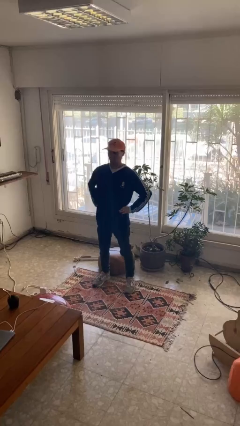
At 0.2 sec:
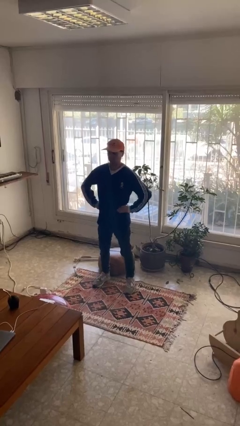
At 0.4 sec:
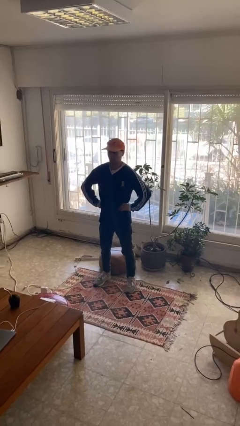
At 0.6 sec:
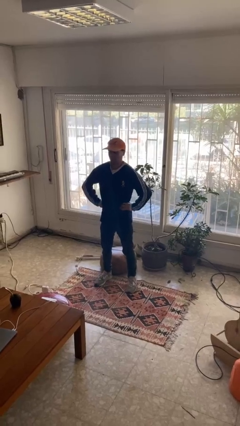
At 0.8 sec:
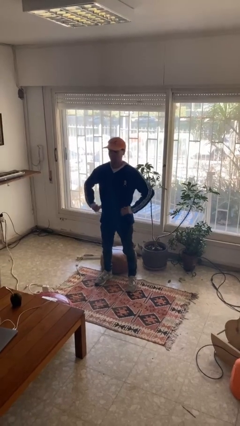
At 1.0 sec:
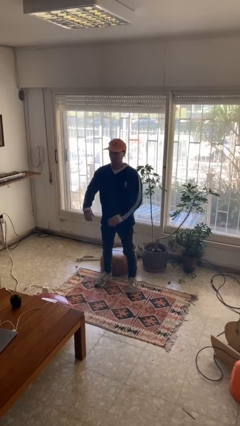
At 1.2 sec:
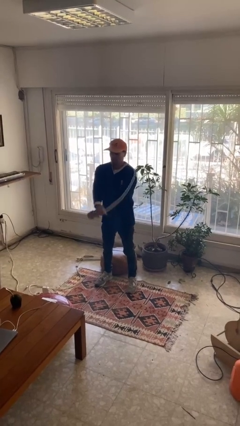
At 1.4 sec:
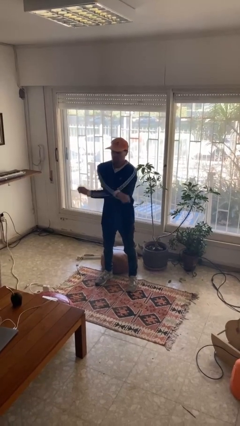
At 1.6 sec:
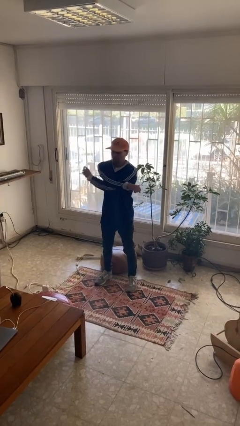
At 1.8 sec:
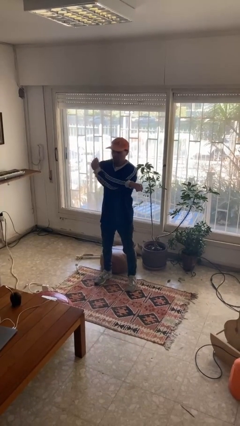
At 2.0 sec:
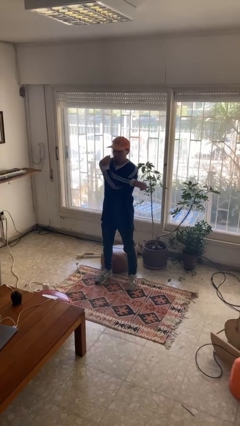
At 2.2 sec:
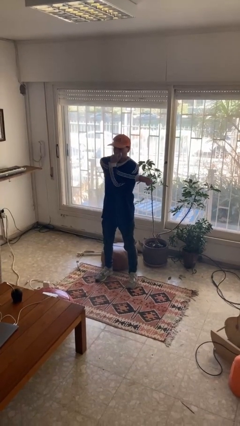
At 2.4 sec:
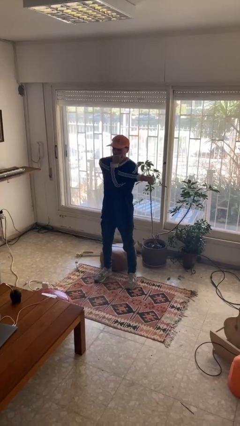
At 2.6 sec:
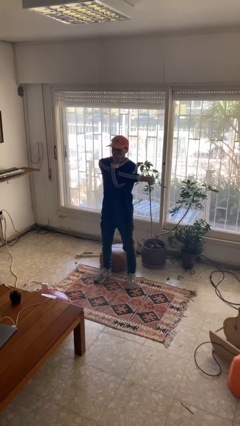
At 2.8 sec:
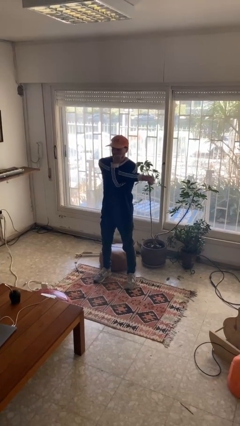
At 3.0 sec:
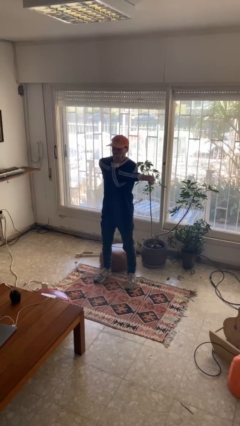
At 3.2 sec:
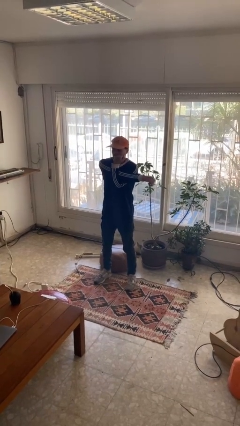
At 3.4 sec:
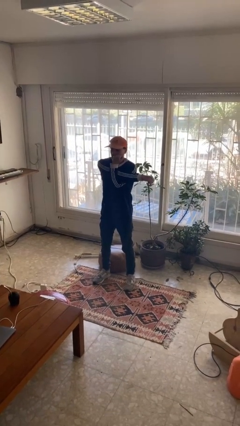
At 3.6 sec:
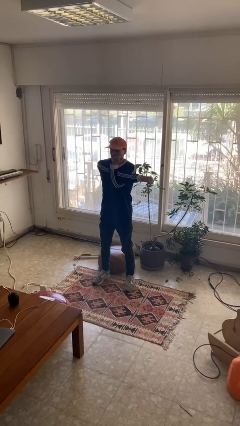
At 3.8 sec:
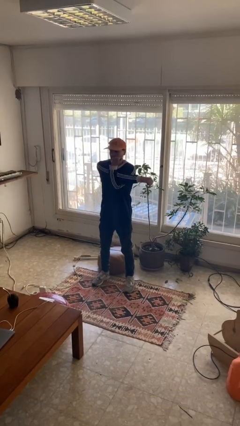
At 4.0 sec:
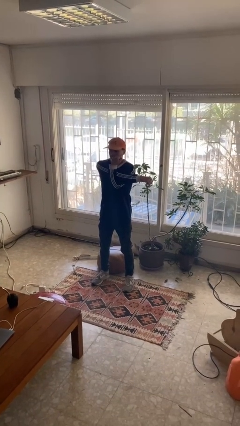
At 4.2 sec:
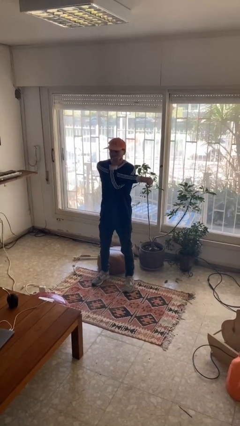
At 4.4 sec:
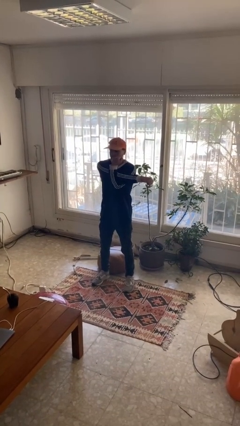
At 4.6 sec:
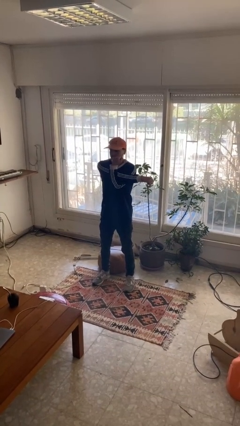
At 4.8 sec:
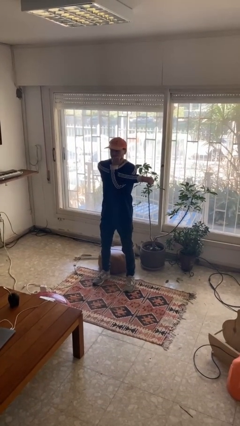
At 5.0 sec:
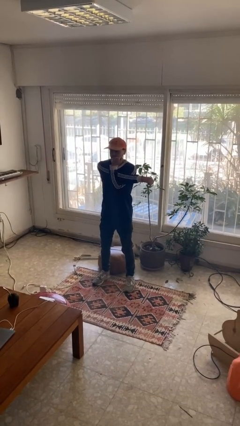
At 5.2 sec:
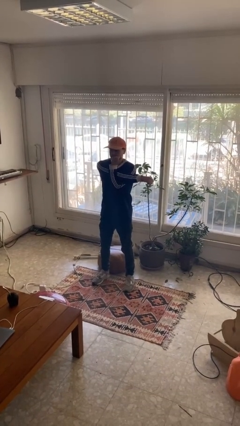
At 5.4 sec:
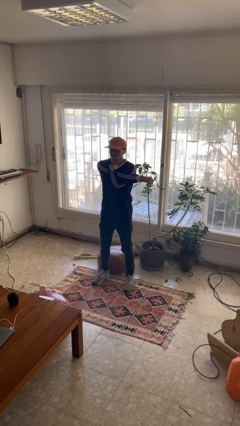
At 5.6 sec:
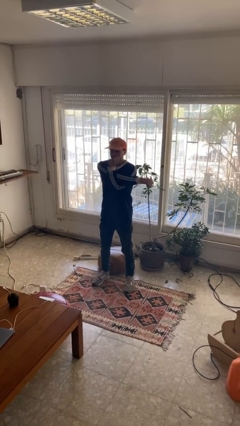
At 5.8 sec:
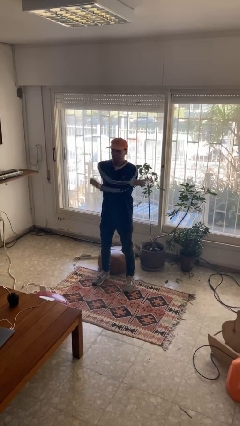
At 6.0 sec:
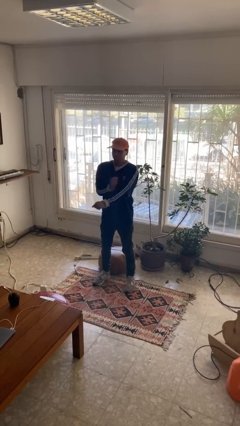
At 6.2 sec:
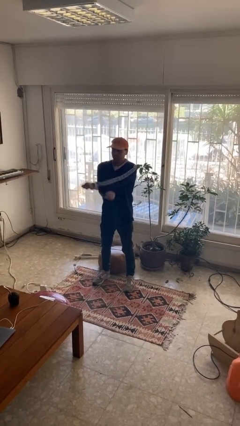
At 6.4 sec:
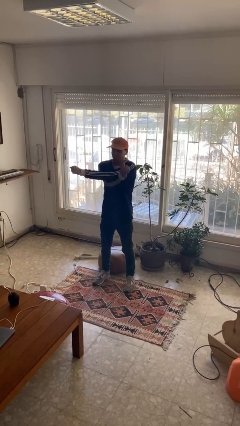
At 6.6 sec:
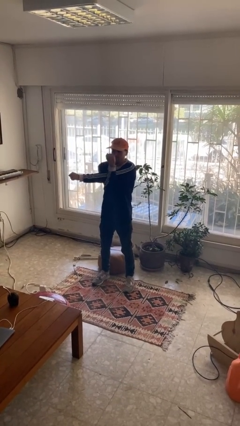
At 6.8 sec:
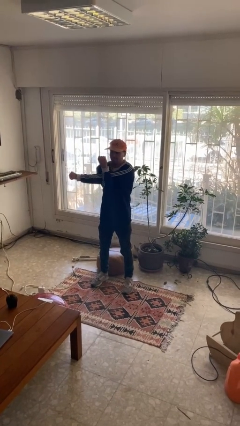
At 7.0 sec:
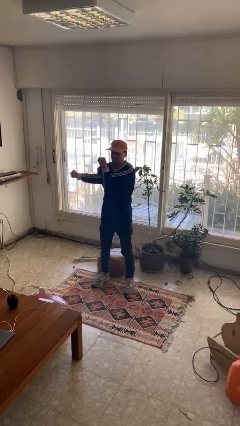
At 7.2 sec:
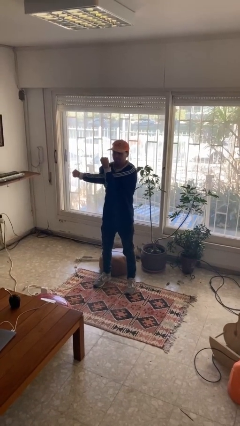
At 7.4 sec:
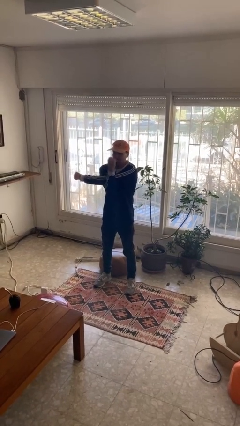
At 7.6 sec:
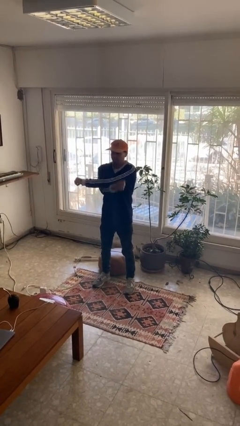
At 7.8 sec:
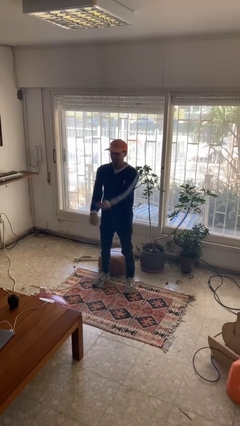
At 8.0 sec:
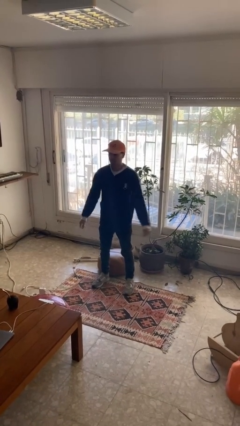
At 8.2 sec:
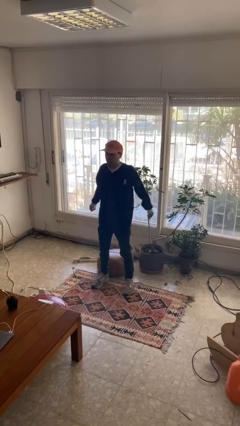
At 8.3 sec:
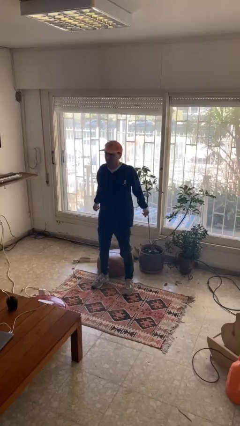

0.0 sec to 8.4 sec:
person stretches arms to side

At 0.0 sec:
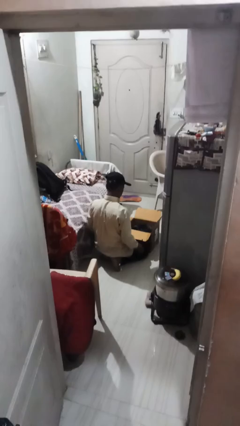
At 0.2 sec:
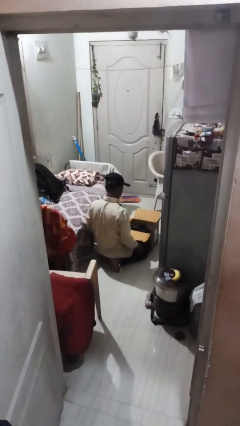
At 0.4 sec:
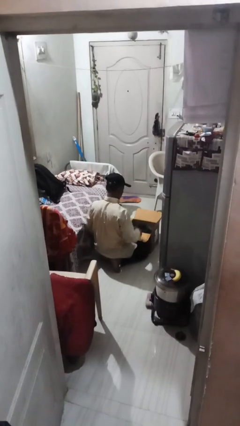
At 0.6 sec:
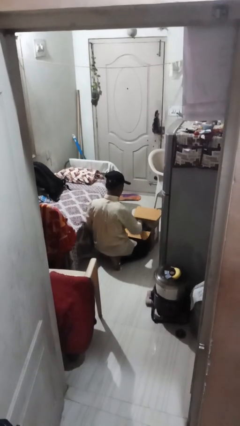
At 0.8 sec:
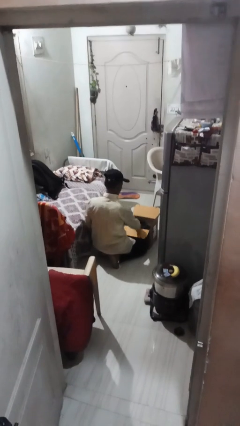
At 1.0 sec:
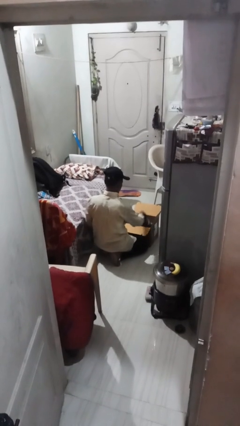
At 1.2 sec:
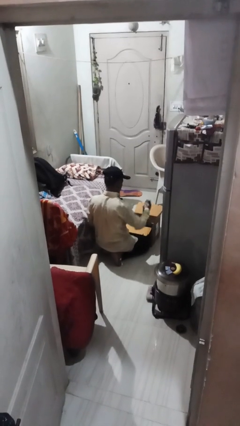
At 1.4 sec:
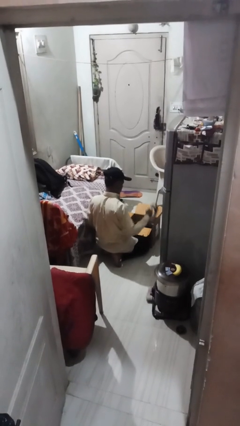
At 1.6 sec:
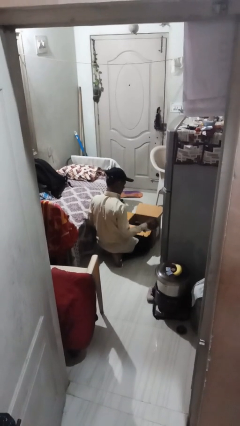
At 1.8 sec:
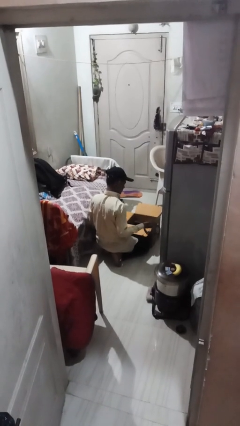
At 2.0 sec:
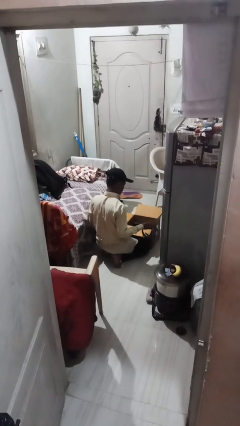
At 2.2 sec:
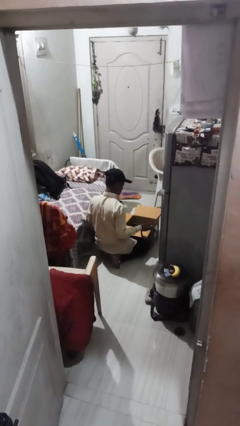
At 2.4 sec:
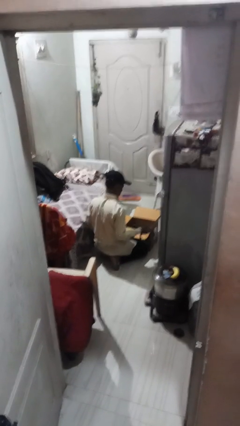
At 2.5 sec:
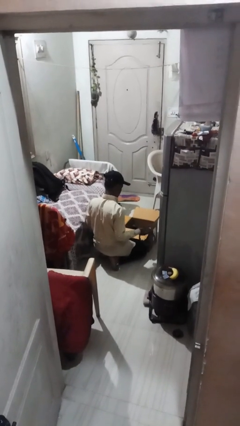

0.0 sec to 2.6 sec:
person takes object from box

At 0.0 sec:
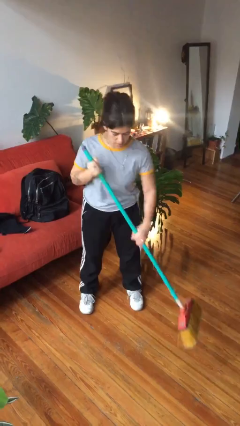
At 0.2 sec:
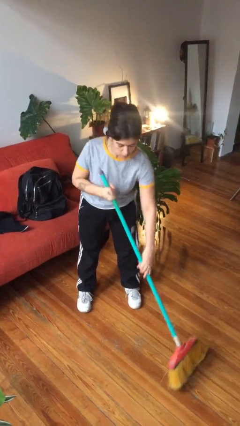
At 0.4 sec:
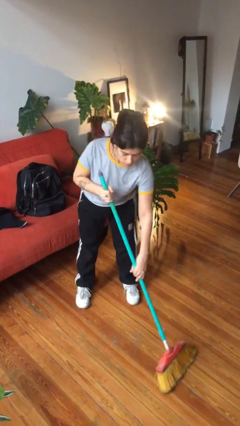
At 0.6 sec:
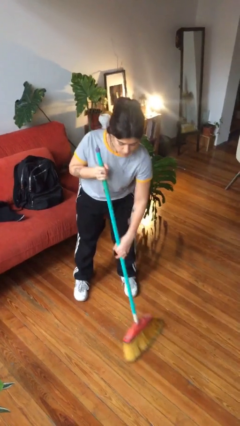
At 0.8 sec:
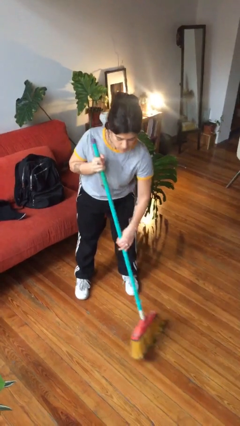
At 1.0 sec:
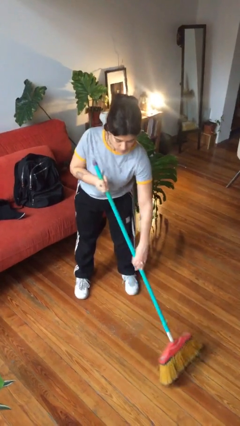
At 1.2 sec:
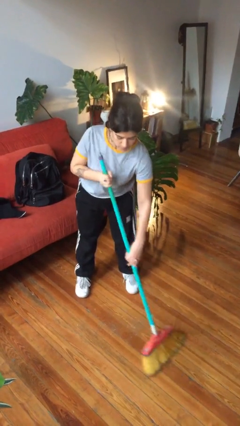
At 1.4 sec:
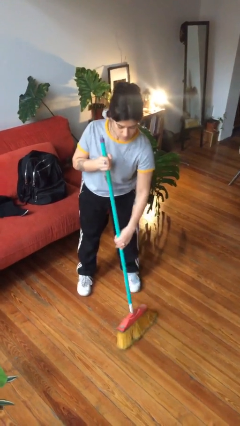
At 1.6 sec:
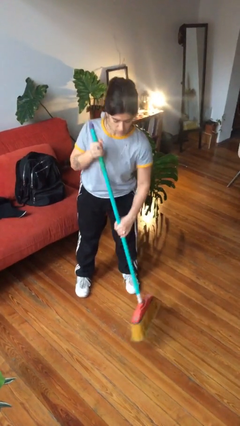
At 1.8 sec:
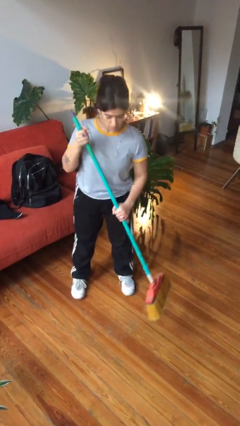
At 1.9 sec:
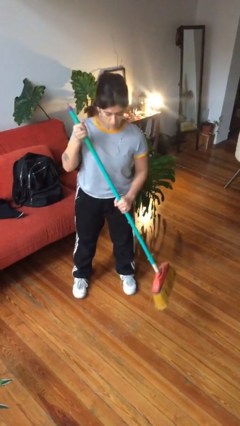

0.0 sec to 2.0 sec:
person sweeps floor

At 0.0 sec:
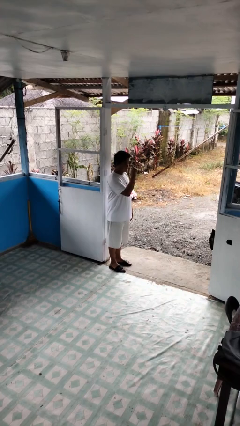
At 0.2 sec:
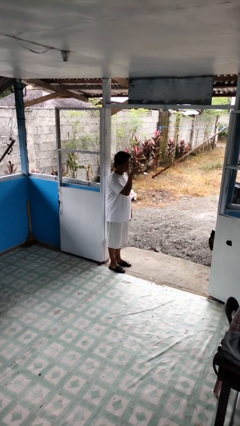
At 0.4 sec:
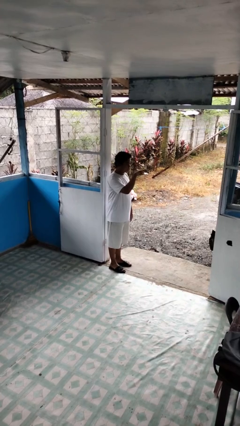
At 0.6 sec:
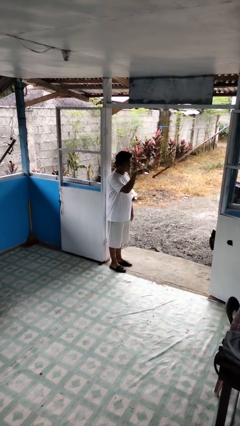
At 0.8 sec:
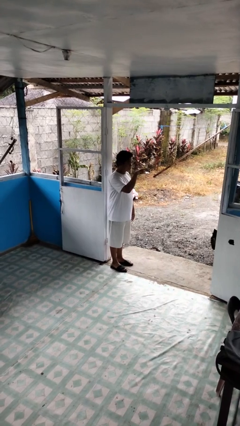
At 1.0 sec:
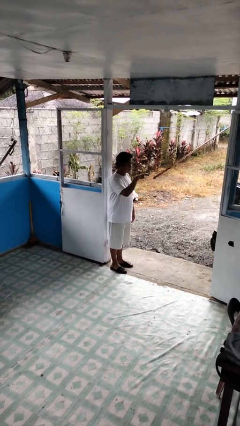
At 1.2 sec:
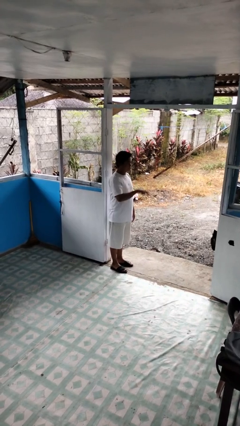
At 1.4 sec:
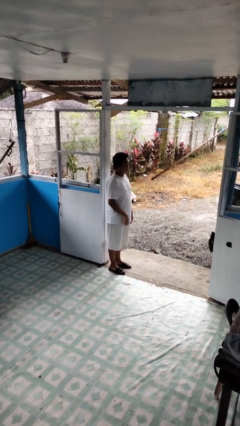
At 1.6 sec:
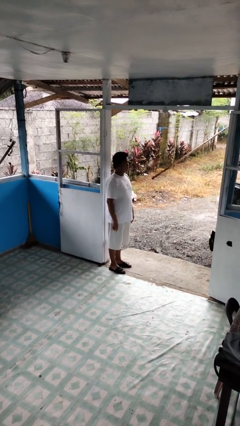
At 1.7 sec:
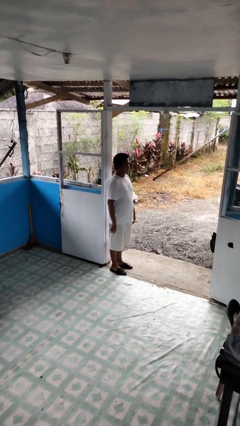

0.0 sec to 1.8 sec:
person gestures watch closely

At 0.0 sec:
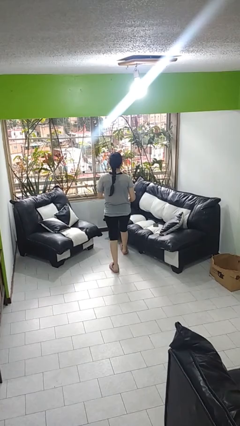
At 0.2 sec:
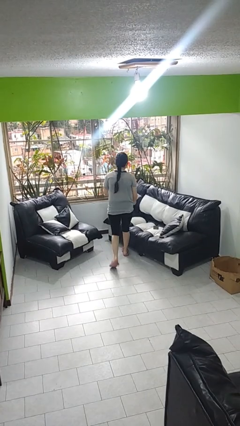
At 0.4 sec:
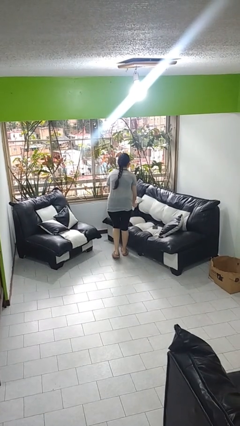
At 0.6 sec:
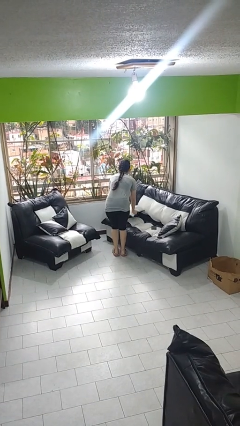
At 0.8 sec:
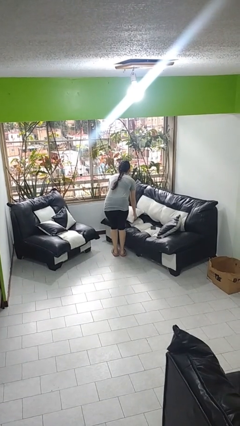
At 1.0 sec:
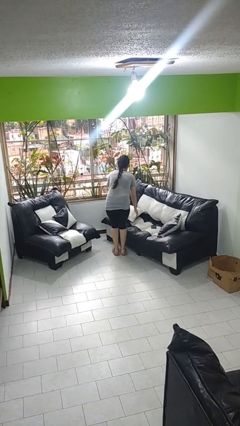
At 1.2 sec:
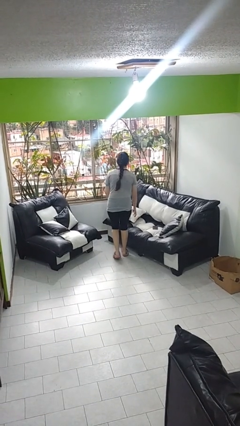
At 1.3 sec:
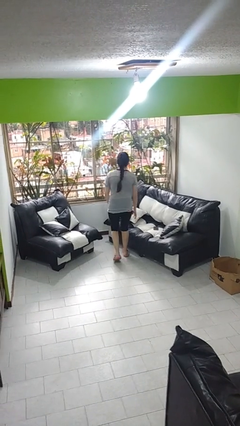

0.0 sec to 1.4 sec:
person puts down object on couch

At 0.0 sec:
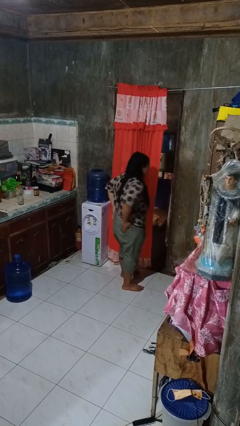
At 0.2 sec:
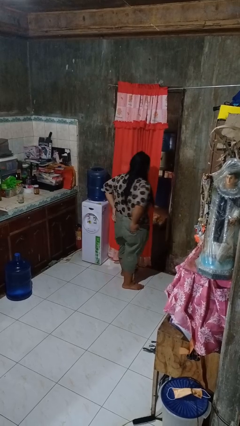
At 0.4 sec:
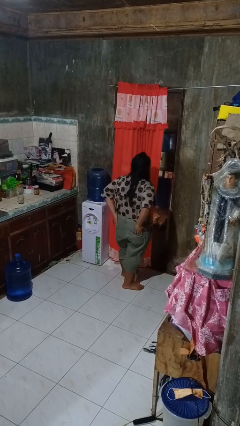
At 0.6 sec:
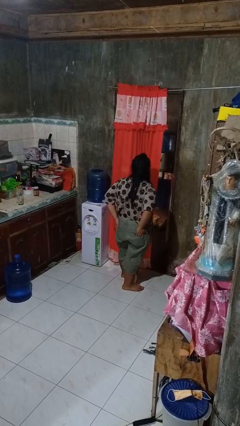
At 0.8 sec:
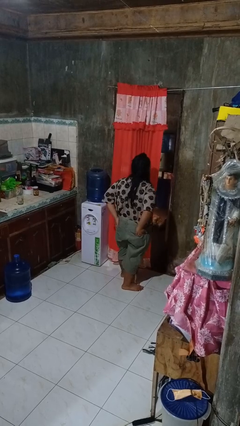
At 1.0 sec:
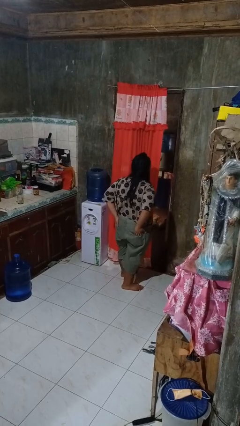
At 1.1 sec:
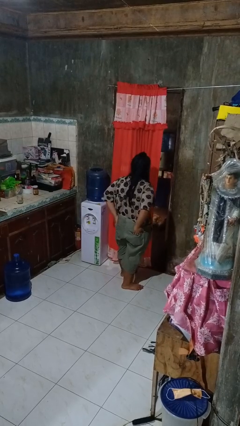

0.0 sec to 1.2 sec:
person puts hands in back pockets
